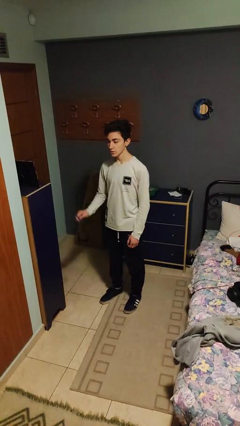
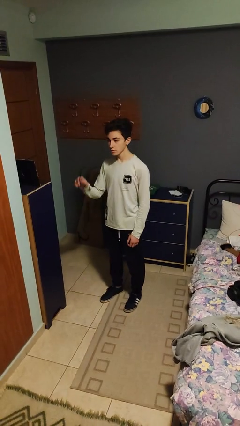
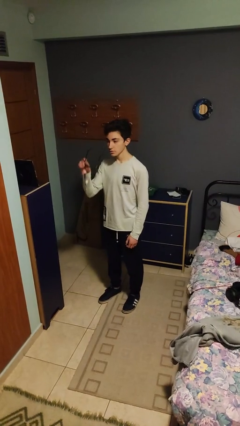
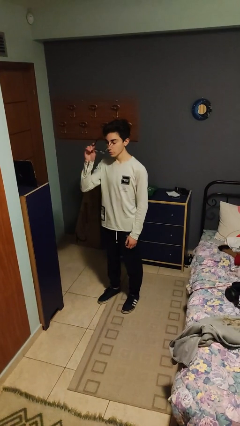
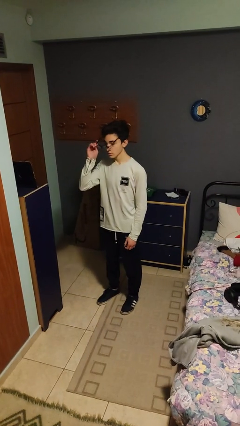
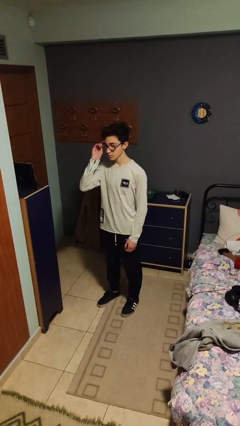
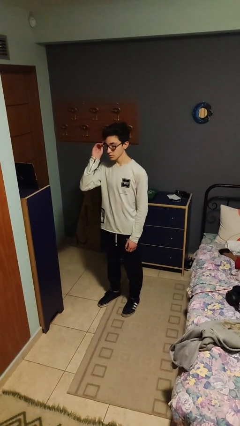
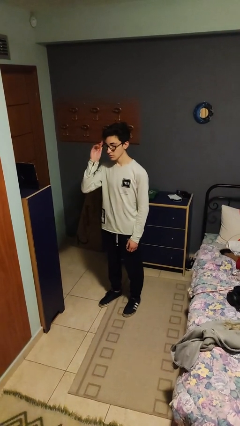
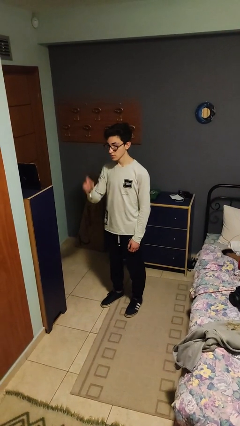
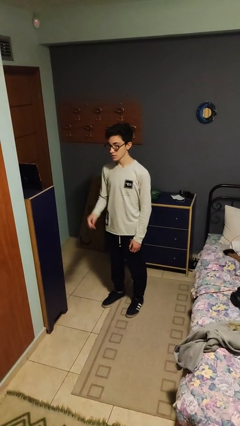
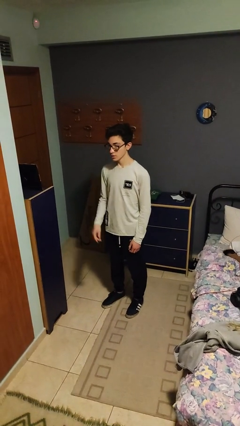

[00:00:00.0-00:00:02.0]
person puts on glasses

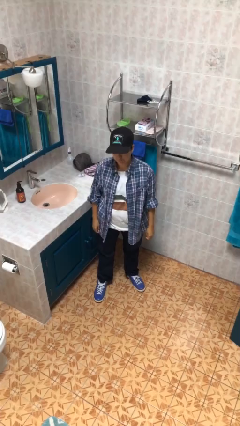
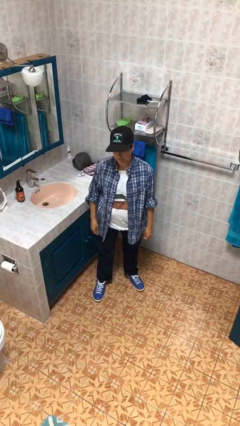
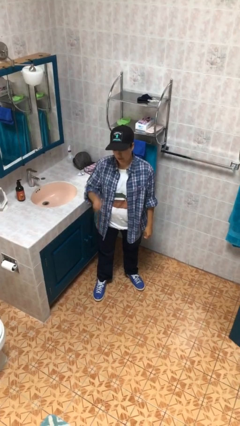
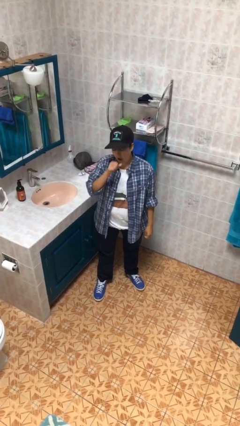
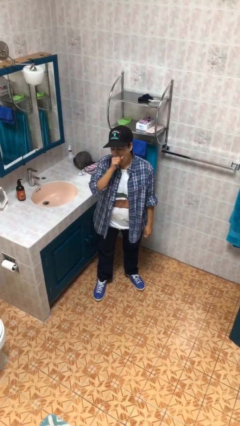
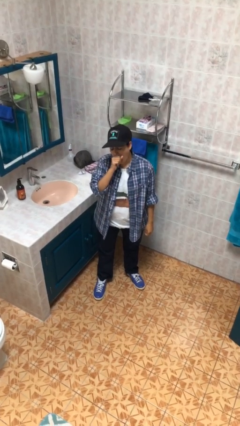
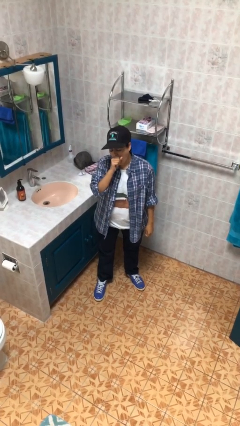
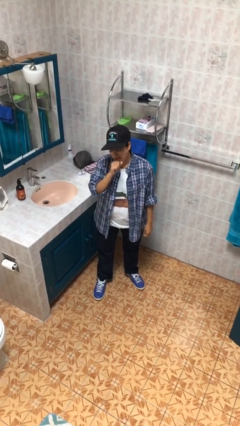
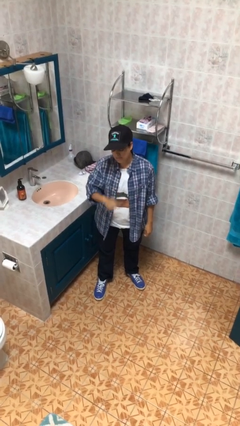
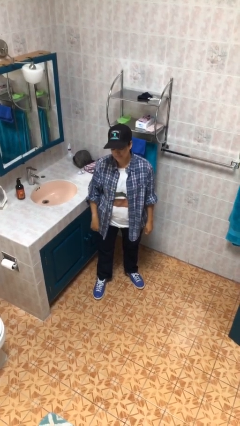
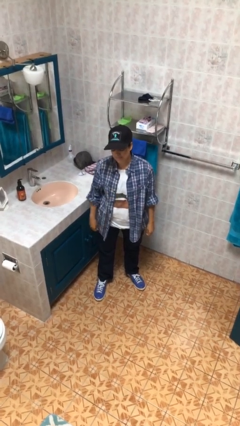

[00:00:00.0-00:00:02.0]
person yawns

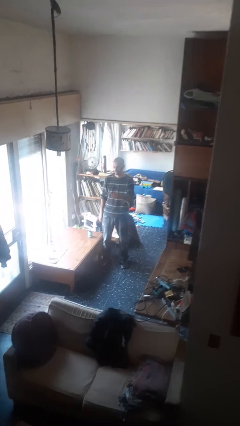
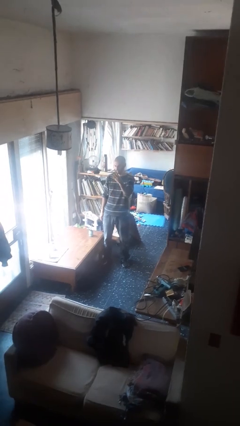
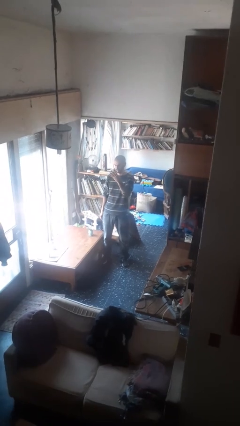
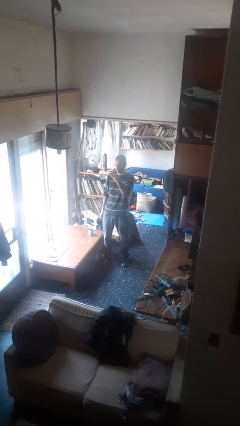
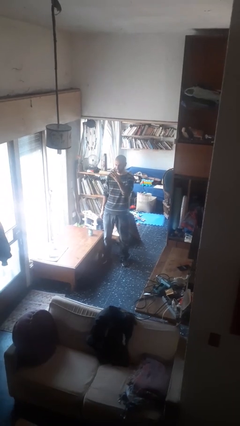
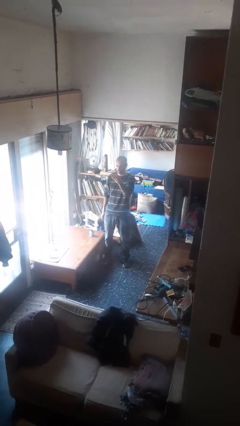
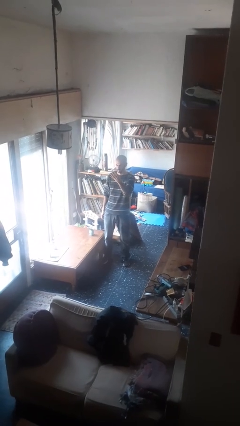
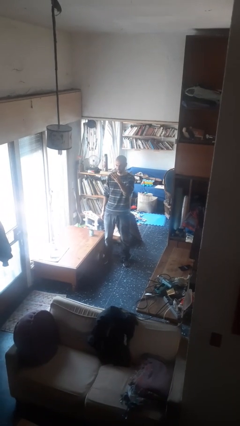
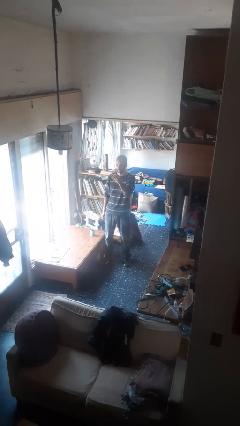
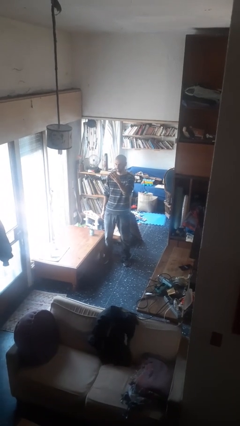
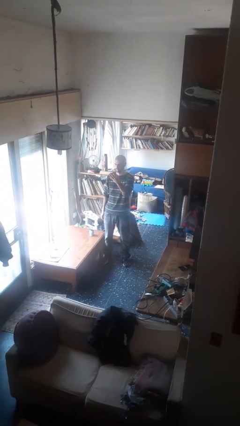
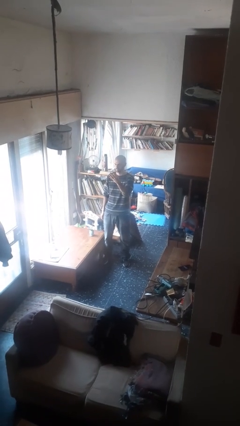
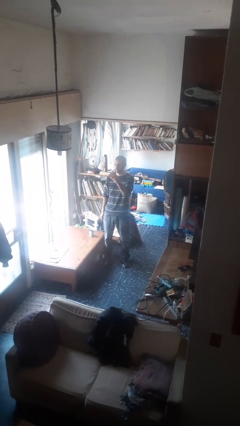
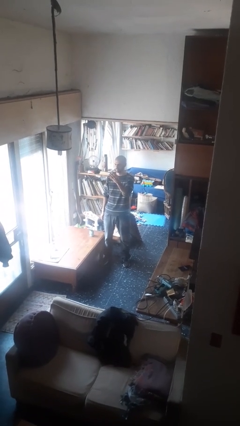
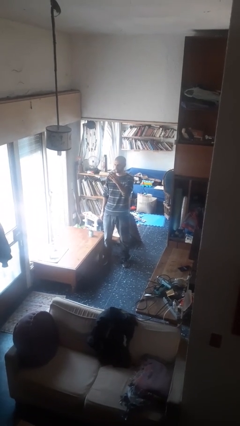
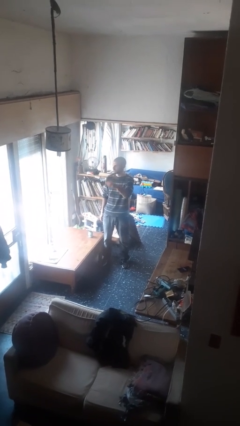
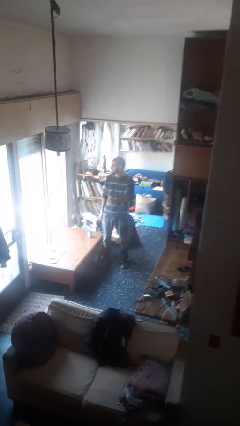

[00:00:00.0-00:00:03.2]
person gestures number four

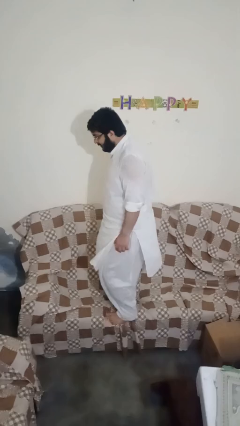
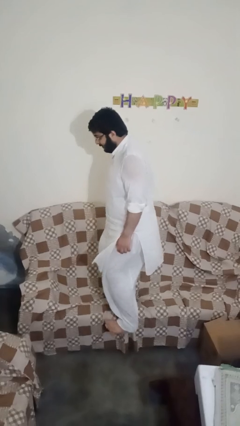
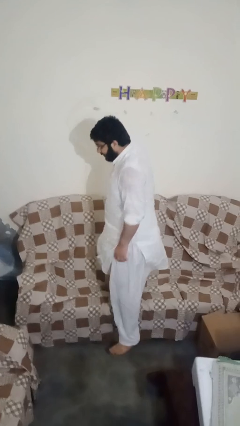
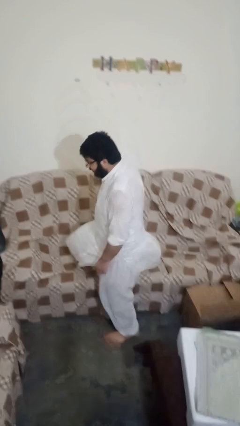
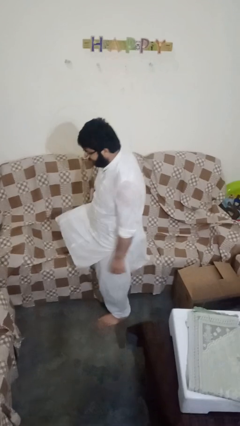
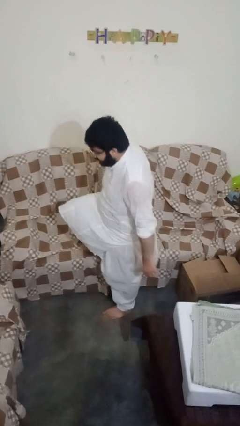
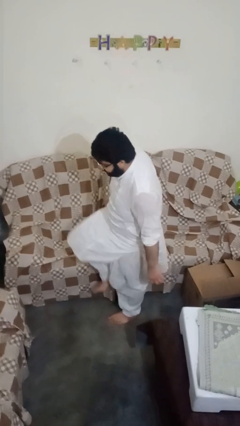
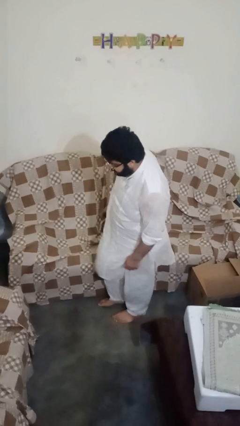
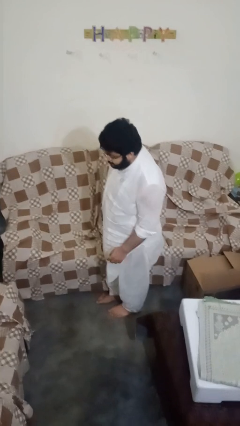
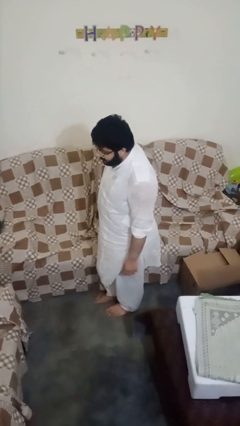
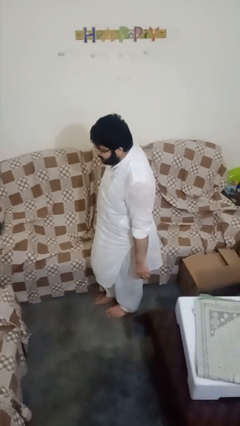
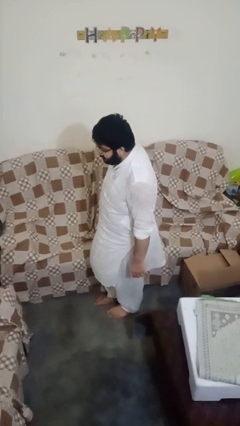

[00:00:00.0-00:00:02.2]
person climbs off couch

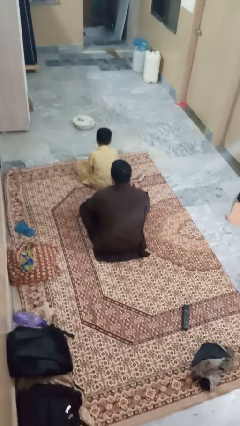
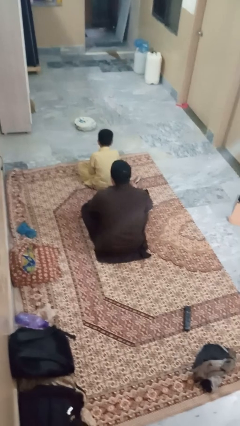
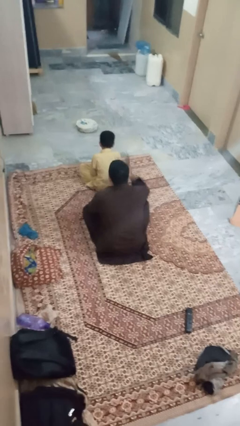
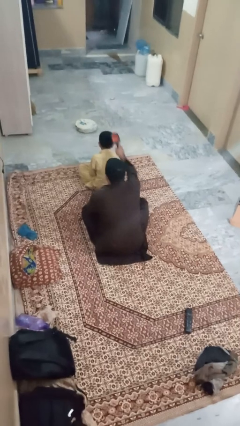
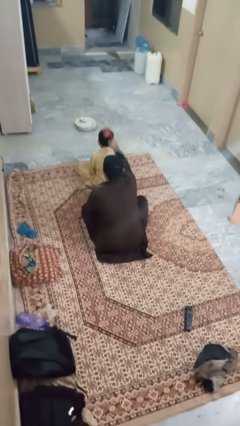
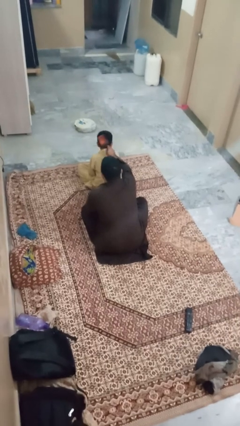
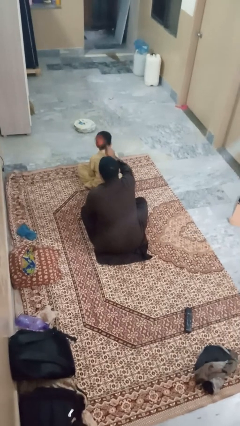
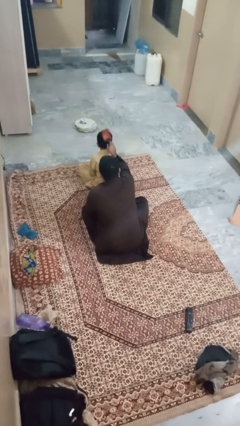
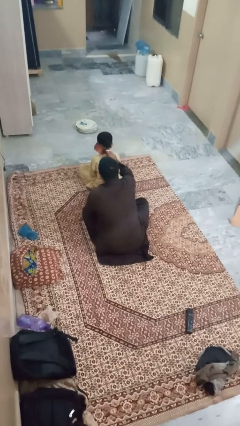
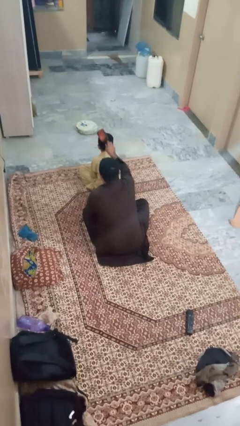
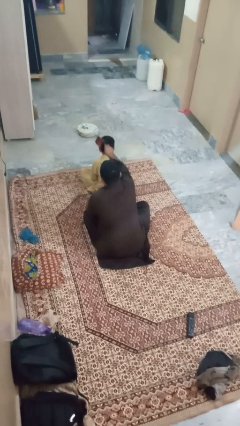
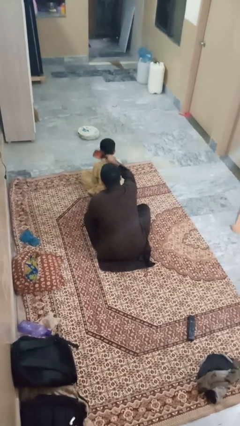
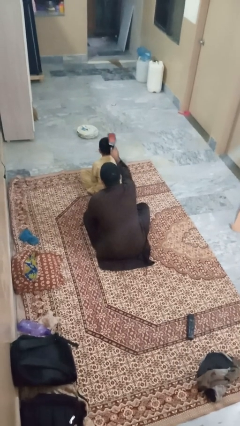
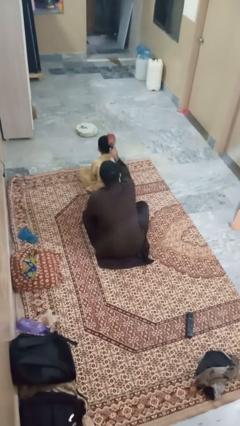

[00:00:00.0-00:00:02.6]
person brushes hair of person

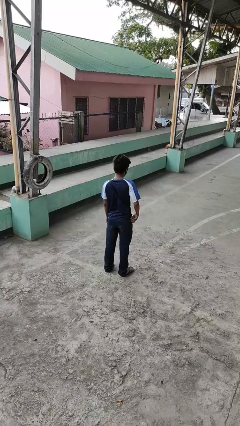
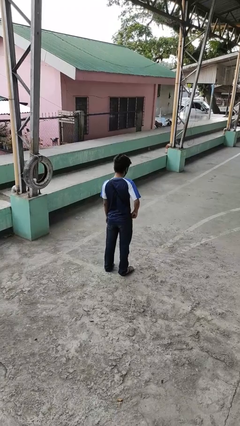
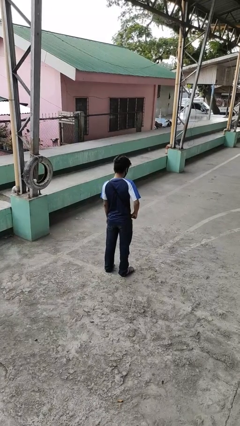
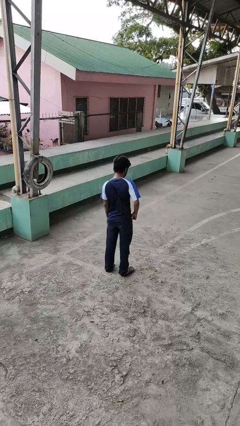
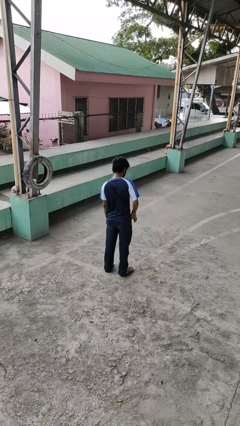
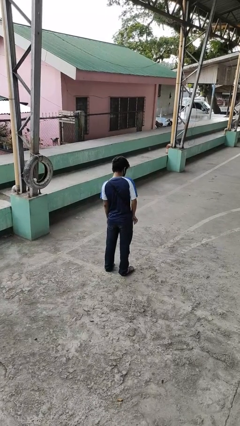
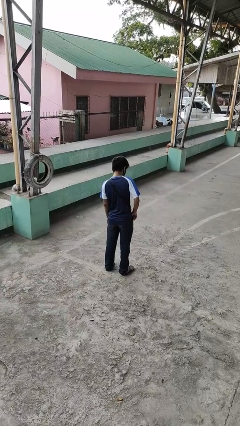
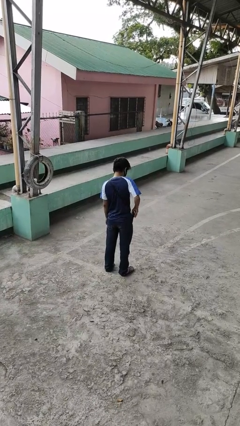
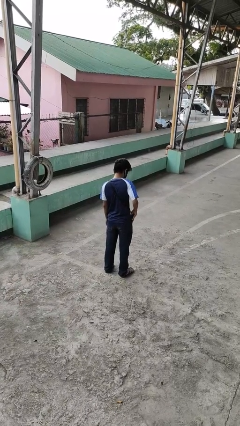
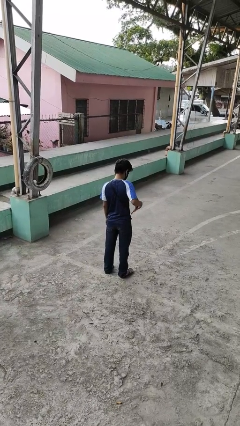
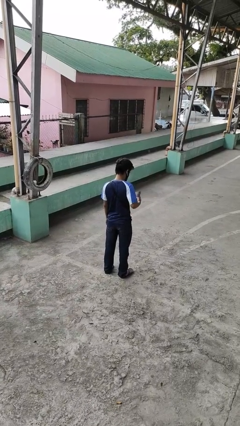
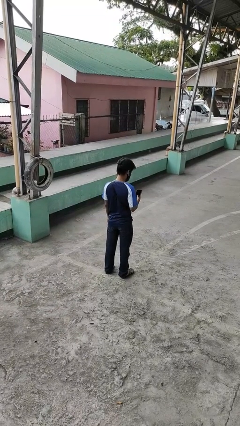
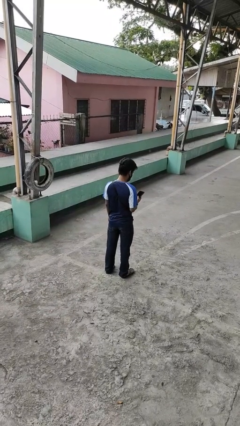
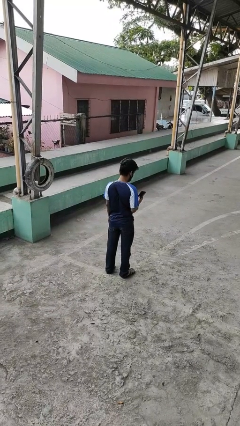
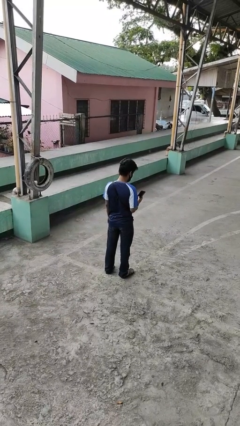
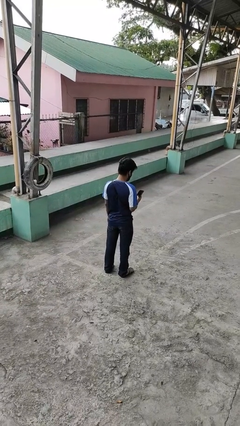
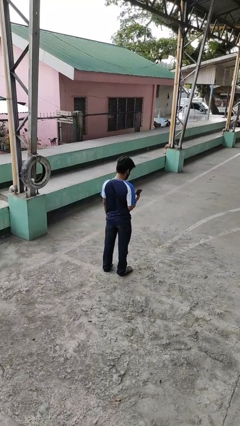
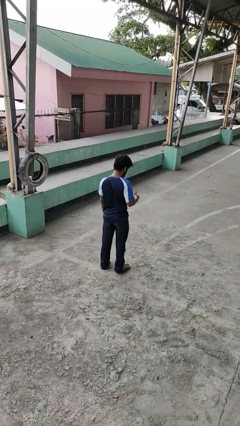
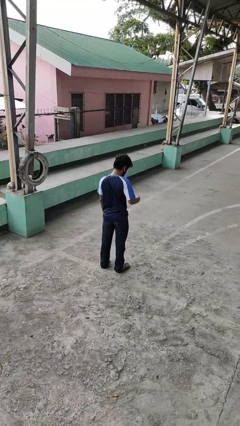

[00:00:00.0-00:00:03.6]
person takes phone from pocket

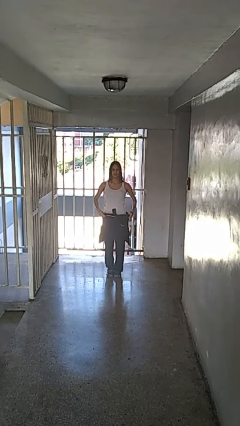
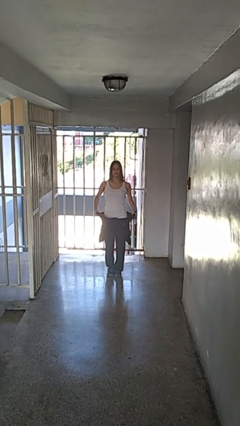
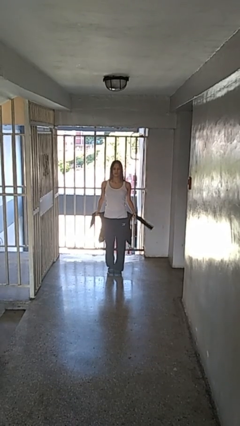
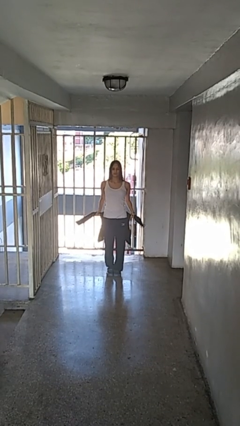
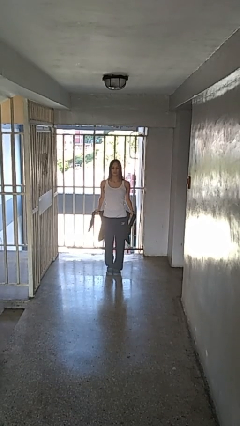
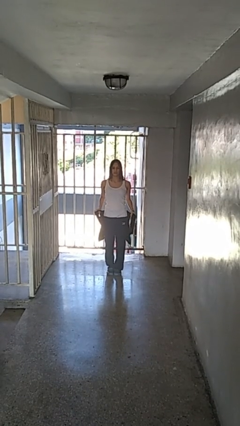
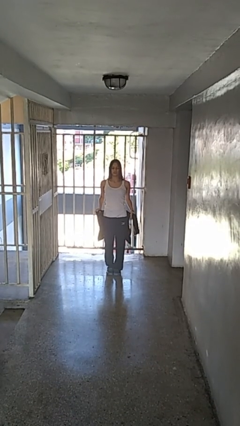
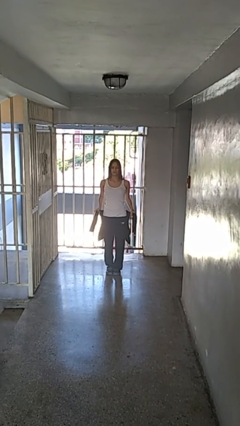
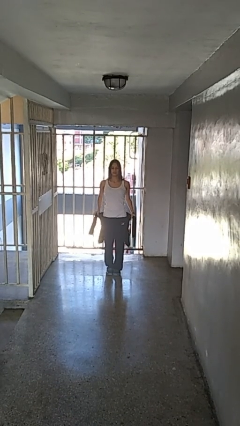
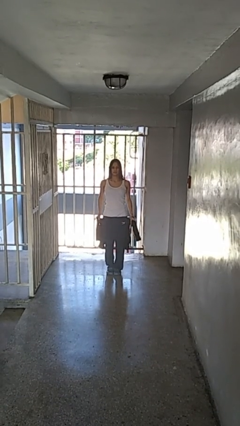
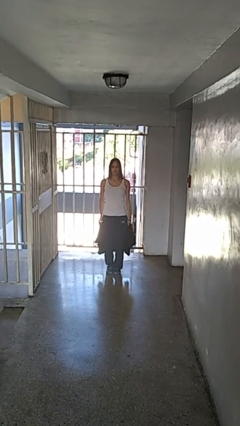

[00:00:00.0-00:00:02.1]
person unties jacket around waist
